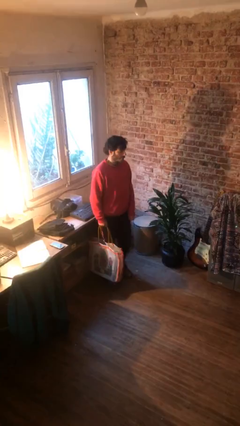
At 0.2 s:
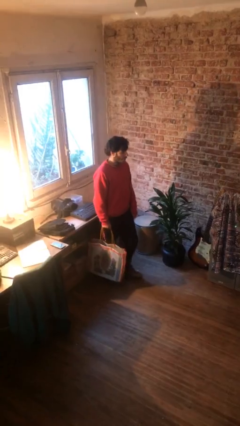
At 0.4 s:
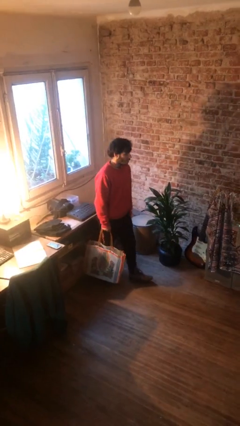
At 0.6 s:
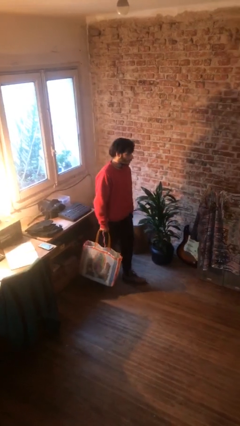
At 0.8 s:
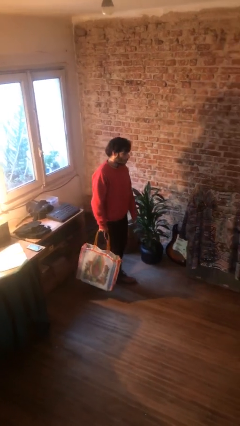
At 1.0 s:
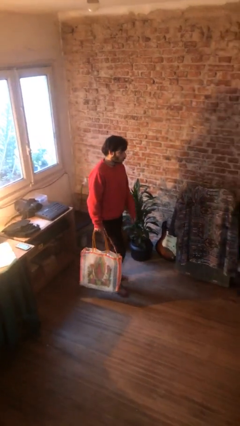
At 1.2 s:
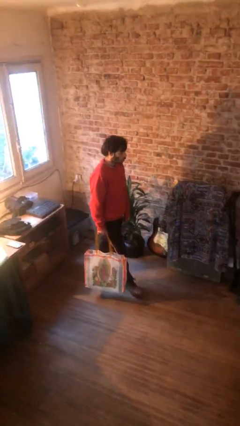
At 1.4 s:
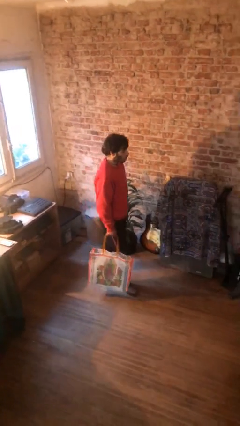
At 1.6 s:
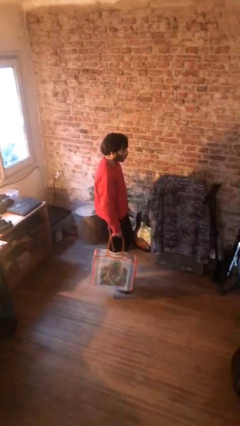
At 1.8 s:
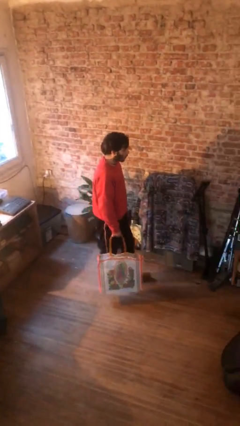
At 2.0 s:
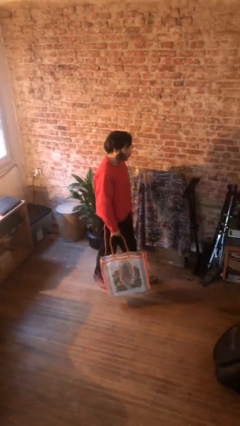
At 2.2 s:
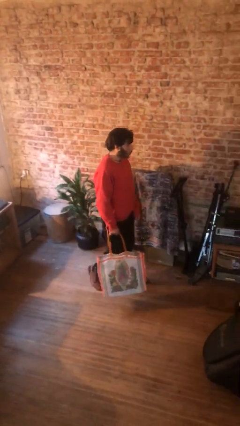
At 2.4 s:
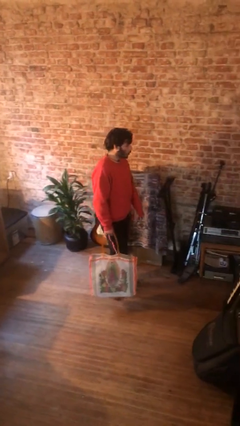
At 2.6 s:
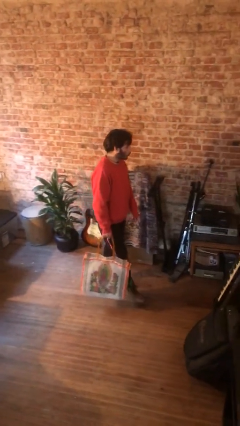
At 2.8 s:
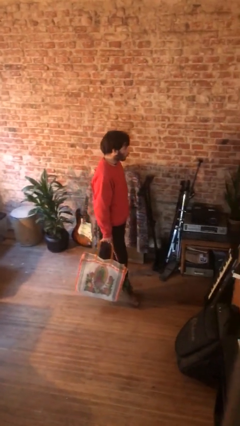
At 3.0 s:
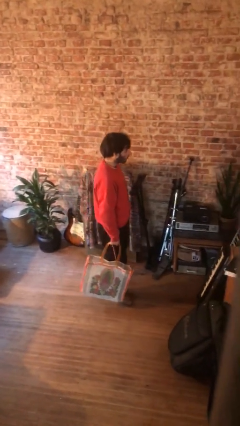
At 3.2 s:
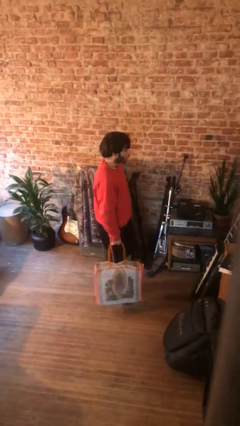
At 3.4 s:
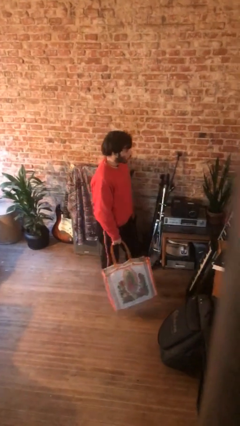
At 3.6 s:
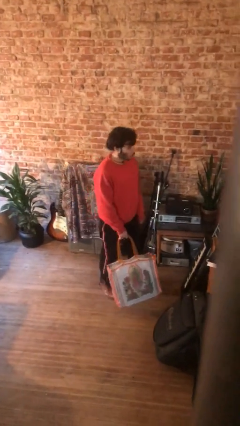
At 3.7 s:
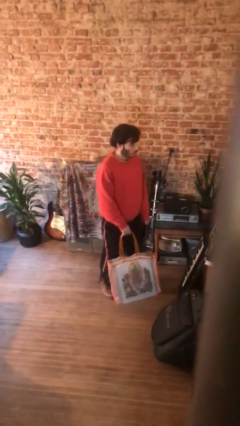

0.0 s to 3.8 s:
person carries groceries

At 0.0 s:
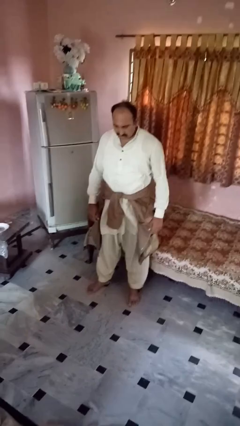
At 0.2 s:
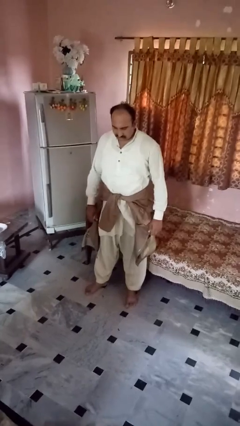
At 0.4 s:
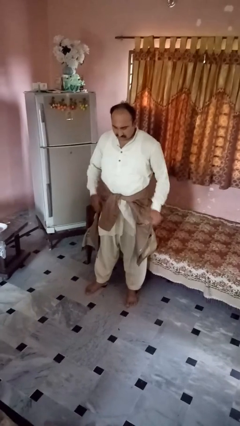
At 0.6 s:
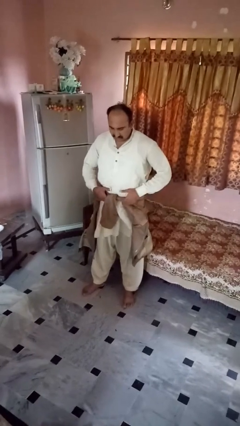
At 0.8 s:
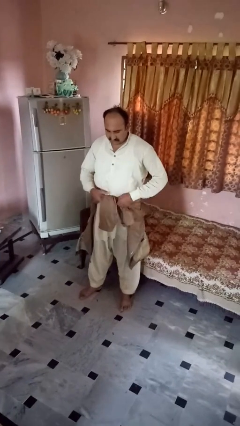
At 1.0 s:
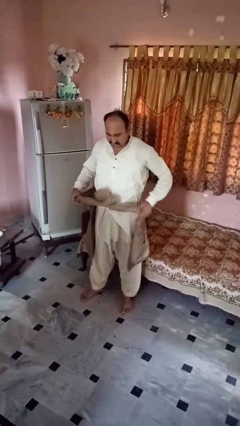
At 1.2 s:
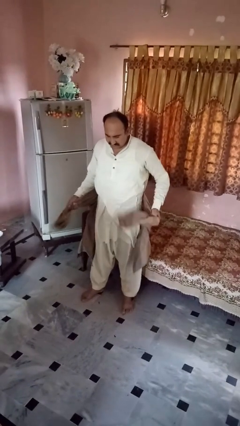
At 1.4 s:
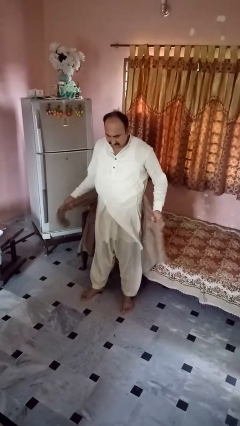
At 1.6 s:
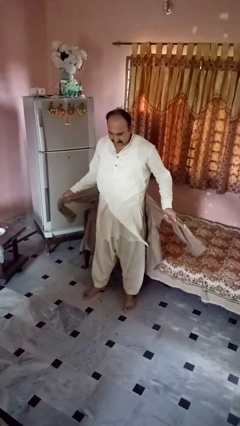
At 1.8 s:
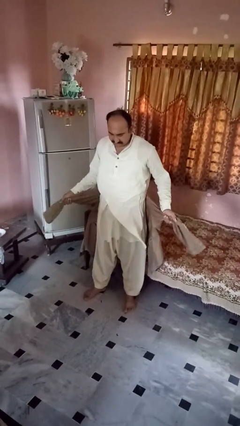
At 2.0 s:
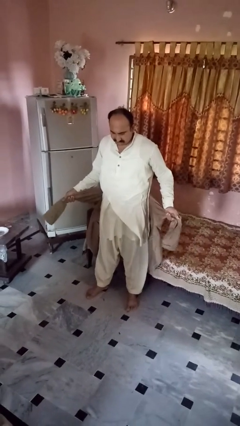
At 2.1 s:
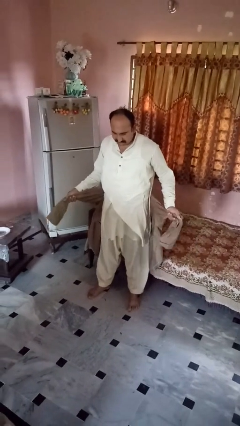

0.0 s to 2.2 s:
person unties jacket around waist

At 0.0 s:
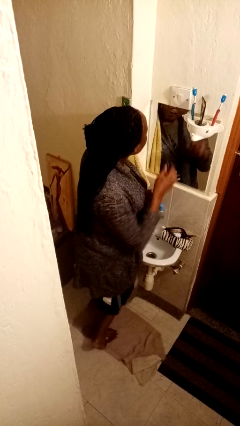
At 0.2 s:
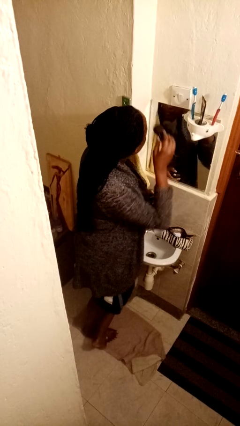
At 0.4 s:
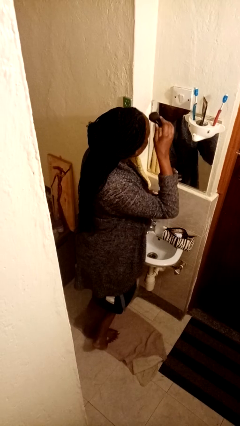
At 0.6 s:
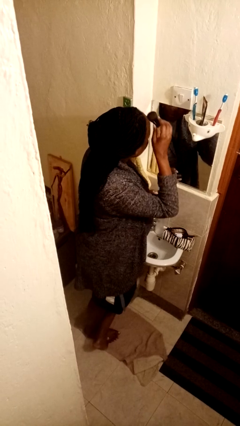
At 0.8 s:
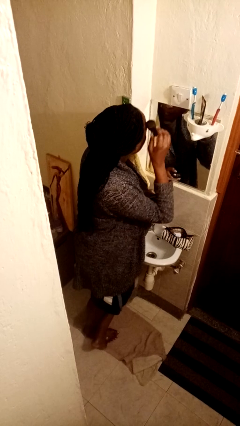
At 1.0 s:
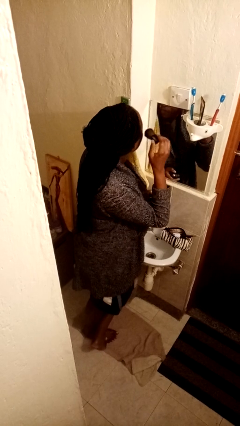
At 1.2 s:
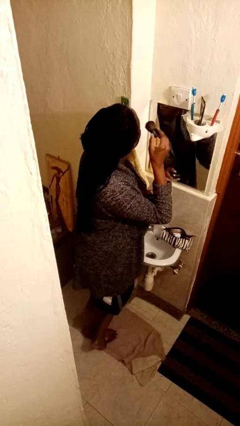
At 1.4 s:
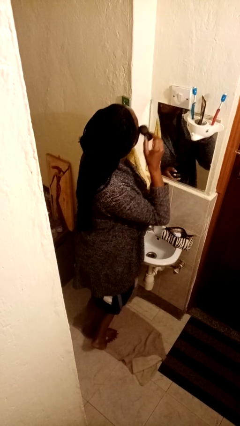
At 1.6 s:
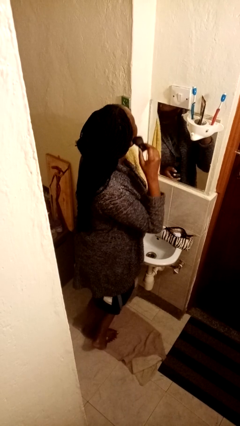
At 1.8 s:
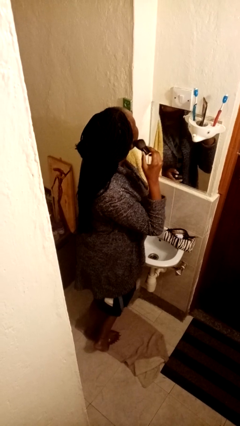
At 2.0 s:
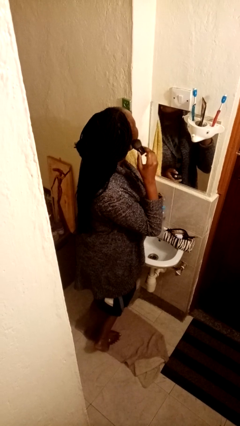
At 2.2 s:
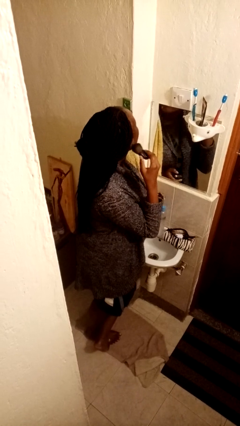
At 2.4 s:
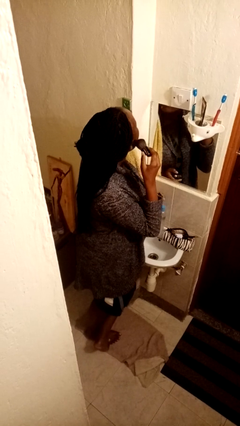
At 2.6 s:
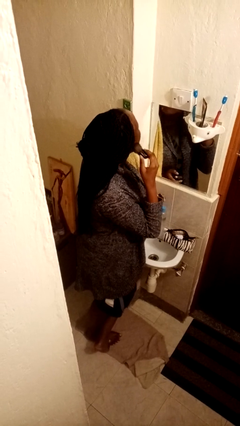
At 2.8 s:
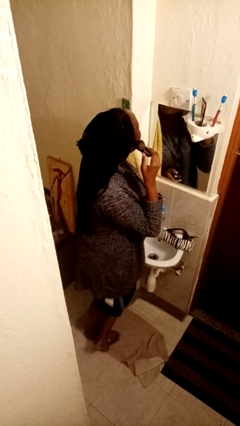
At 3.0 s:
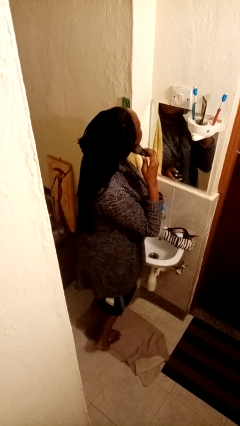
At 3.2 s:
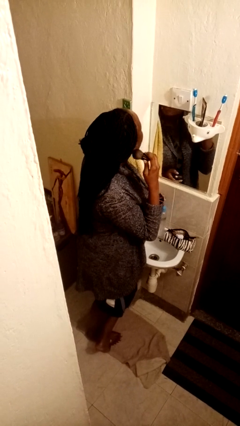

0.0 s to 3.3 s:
person applies foundation makeup

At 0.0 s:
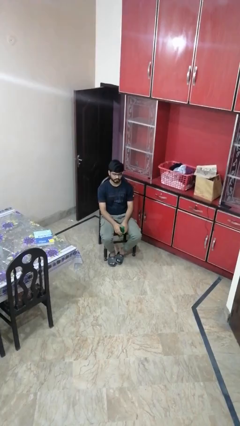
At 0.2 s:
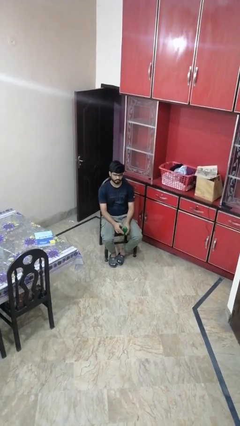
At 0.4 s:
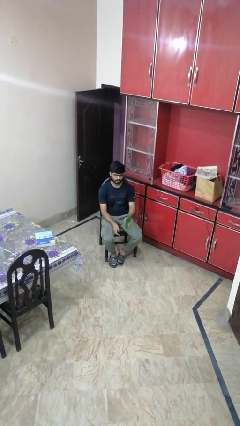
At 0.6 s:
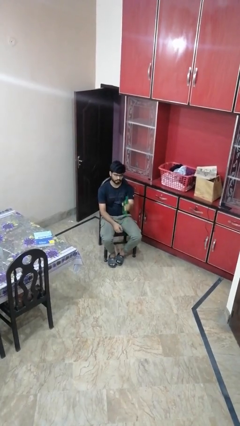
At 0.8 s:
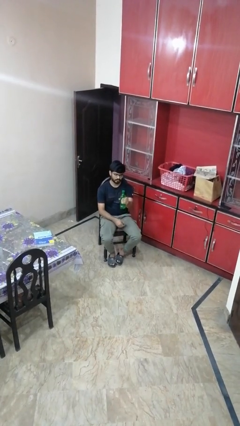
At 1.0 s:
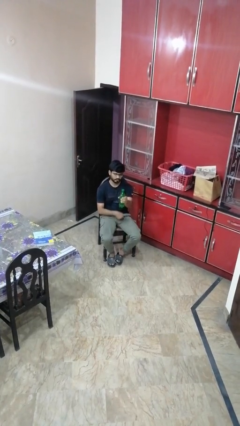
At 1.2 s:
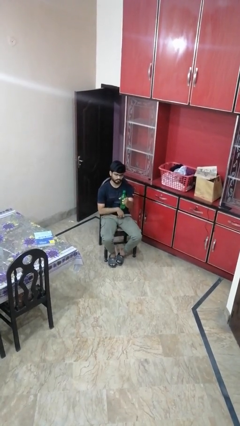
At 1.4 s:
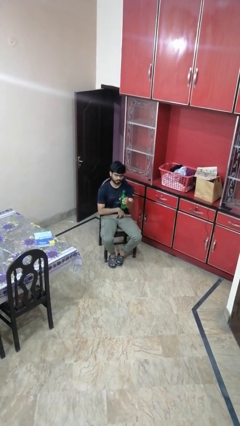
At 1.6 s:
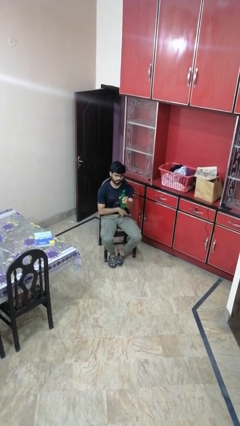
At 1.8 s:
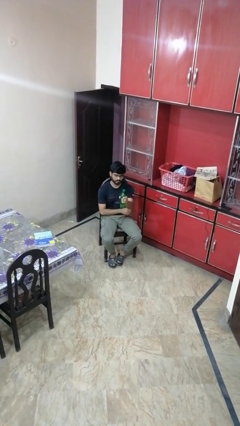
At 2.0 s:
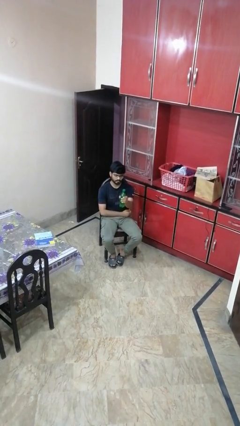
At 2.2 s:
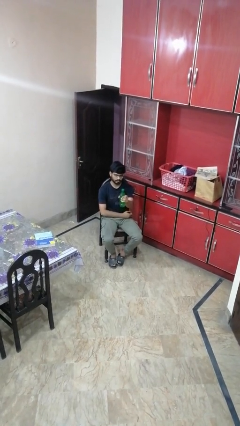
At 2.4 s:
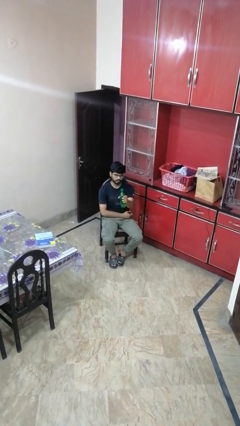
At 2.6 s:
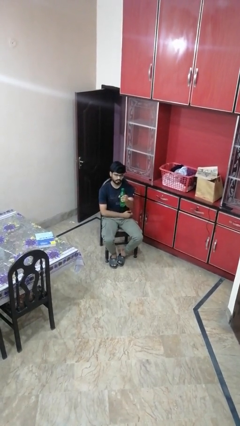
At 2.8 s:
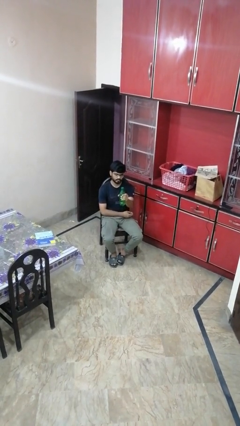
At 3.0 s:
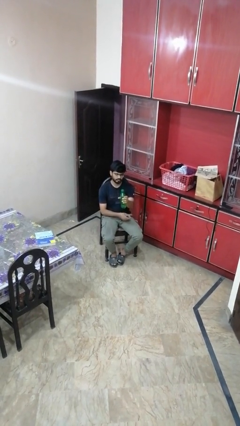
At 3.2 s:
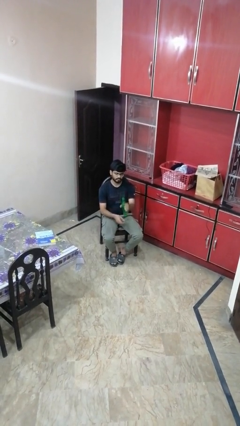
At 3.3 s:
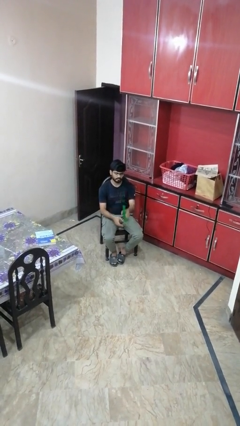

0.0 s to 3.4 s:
person squeezes object

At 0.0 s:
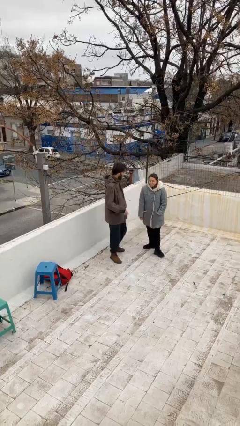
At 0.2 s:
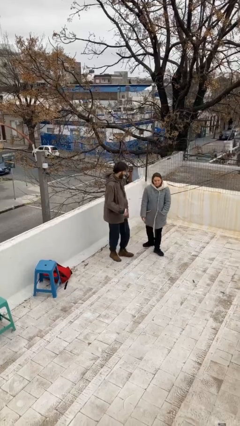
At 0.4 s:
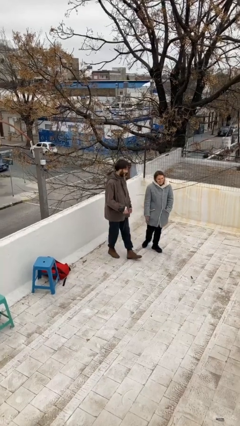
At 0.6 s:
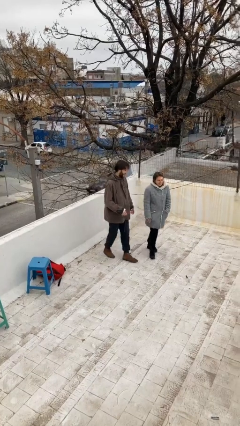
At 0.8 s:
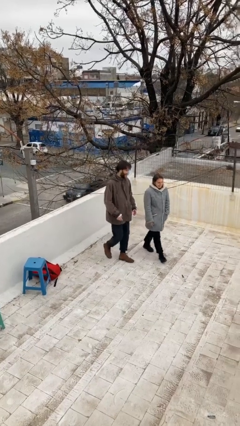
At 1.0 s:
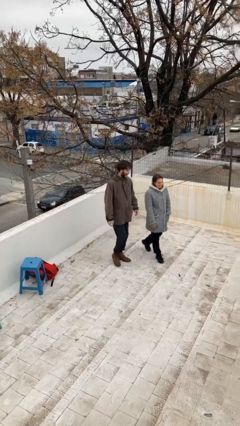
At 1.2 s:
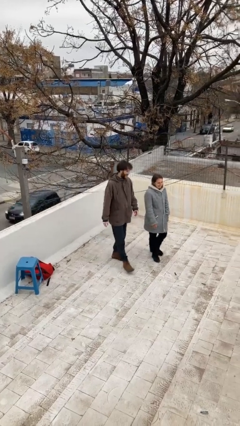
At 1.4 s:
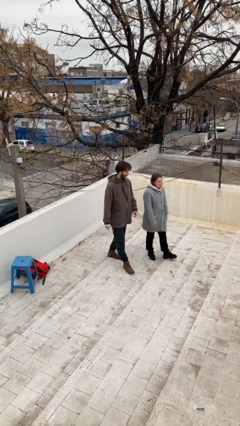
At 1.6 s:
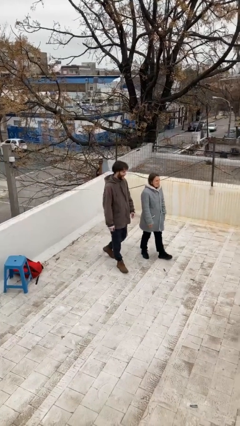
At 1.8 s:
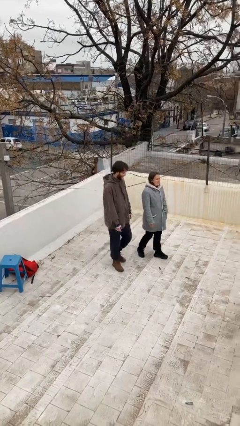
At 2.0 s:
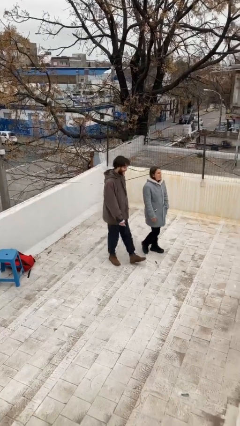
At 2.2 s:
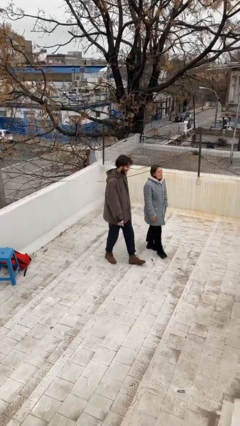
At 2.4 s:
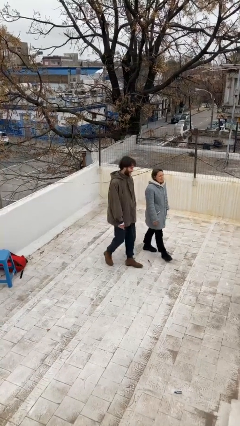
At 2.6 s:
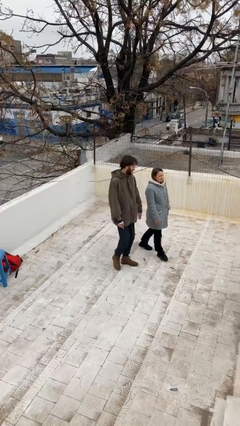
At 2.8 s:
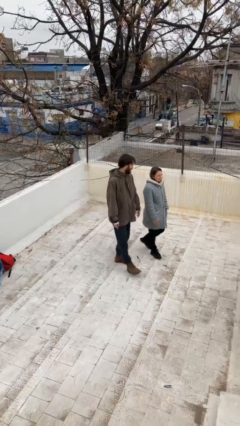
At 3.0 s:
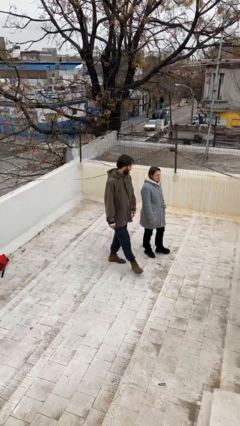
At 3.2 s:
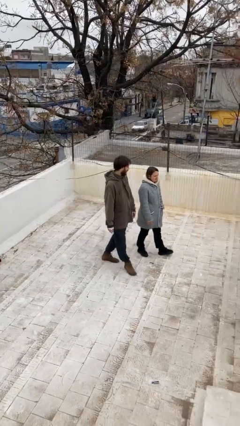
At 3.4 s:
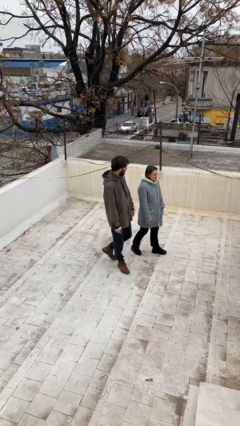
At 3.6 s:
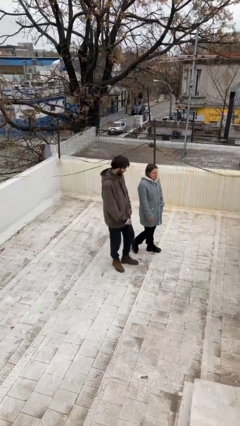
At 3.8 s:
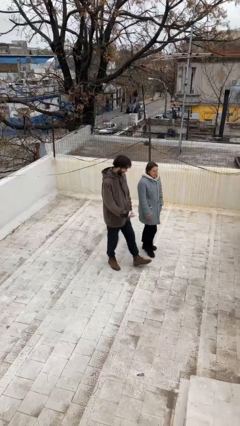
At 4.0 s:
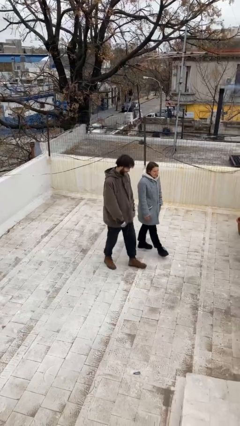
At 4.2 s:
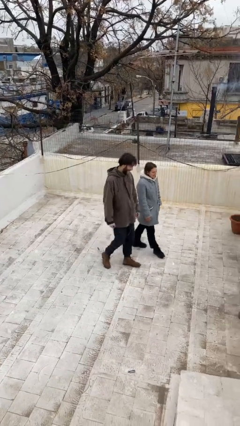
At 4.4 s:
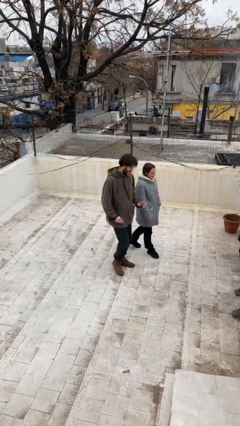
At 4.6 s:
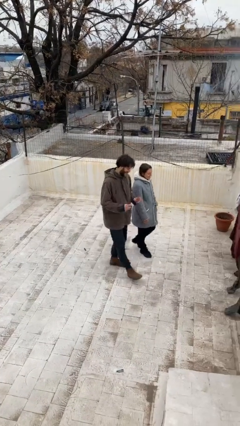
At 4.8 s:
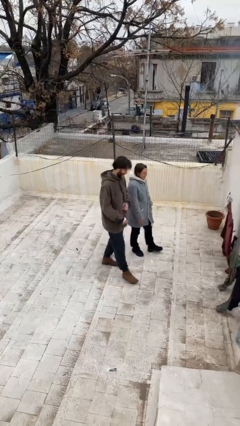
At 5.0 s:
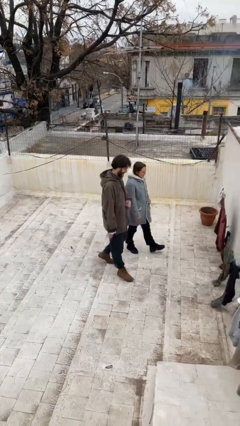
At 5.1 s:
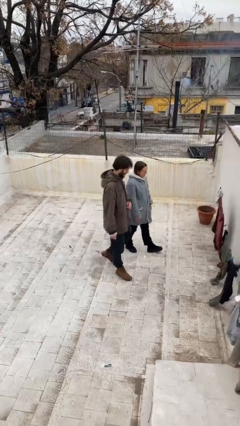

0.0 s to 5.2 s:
person talks to person
